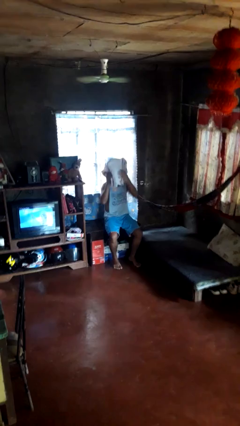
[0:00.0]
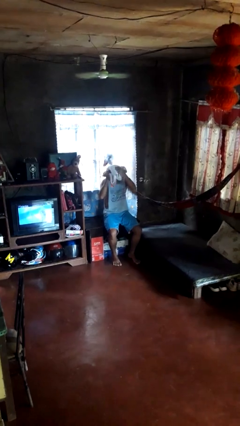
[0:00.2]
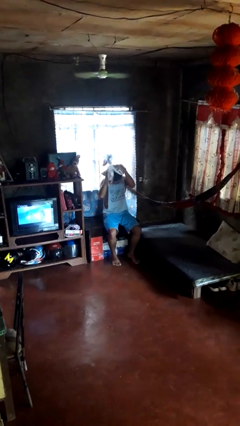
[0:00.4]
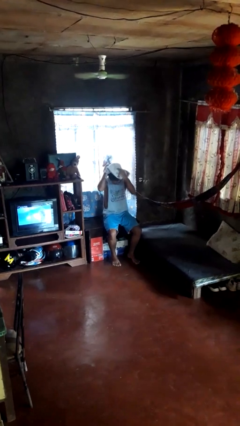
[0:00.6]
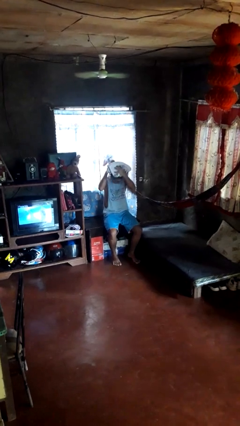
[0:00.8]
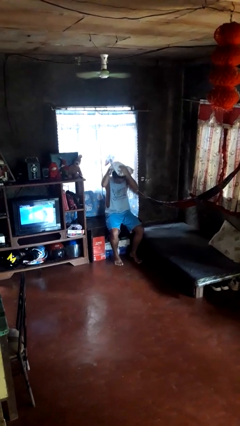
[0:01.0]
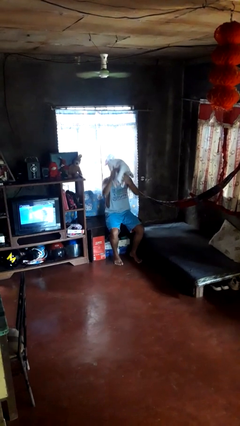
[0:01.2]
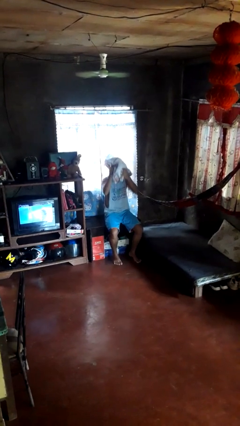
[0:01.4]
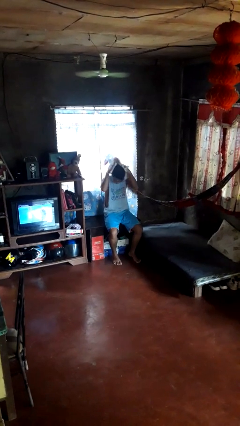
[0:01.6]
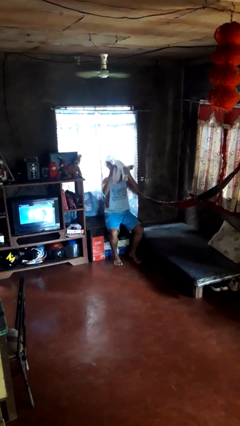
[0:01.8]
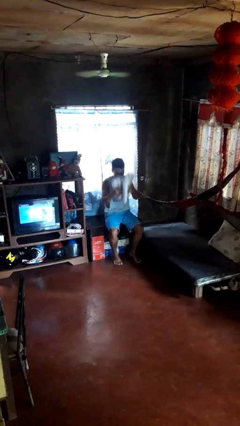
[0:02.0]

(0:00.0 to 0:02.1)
person dries hair with towel

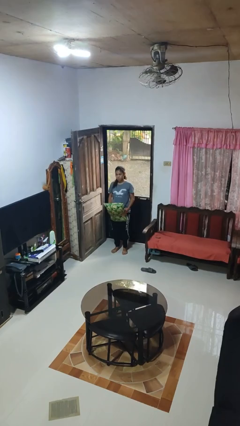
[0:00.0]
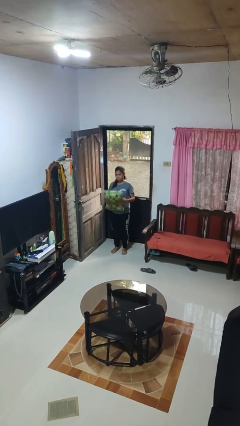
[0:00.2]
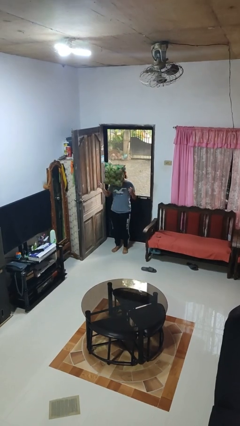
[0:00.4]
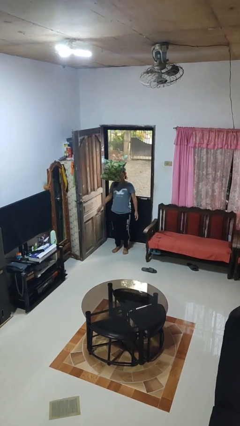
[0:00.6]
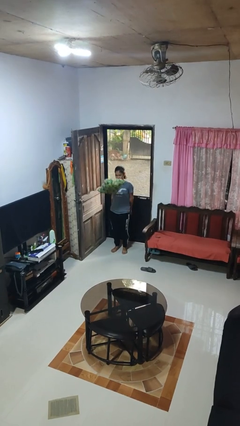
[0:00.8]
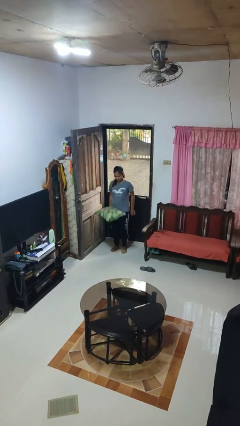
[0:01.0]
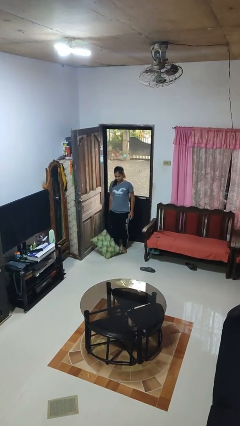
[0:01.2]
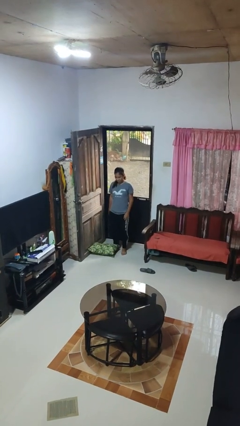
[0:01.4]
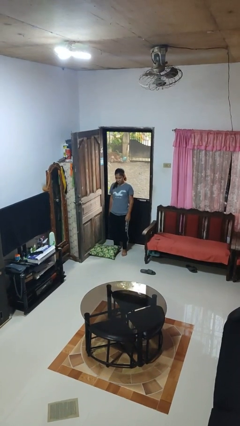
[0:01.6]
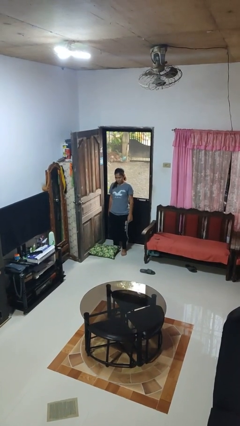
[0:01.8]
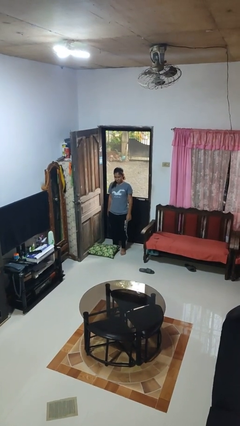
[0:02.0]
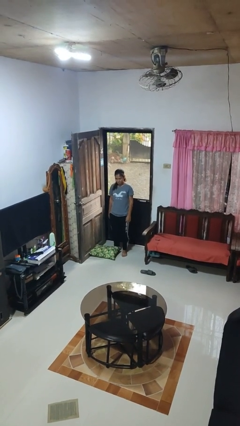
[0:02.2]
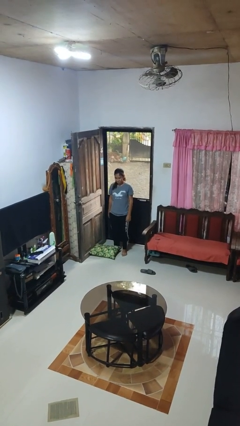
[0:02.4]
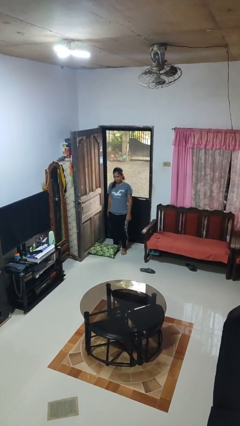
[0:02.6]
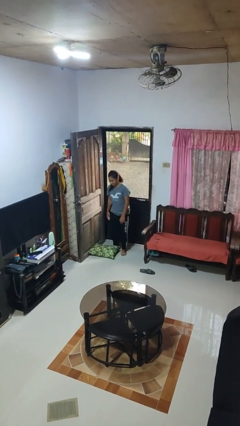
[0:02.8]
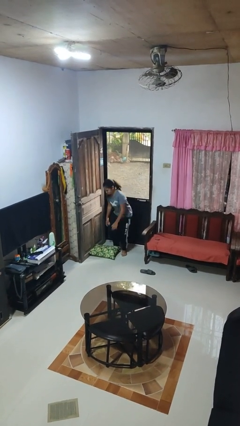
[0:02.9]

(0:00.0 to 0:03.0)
person throws object into air

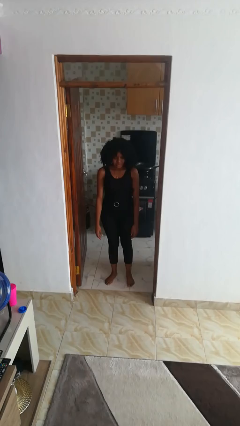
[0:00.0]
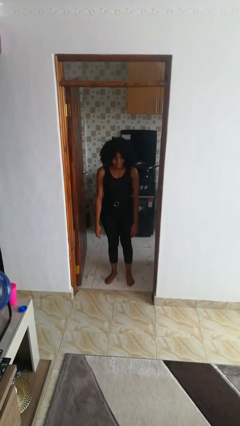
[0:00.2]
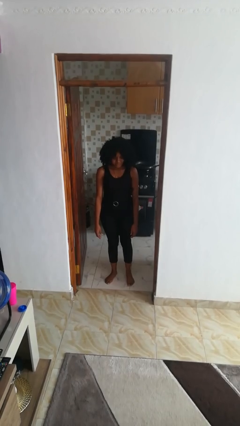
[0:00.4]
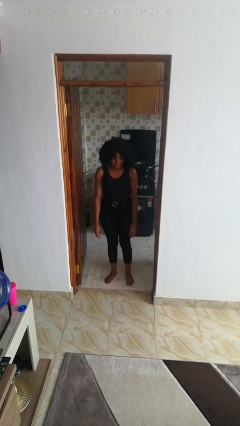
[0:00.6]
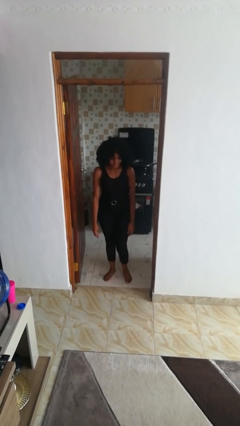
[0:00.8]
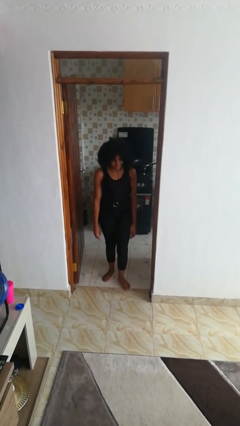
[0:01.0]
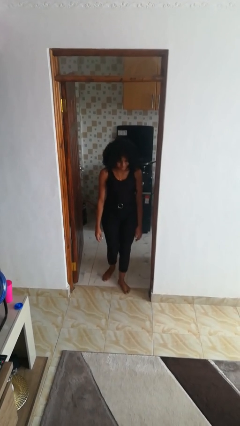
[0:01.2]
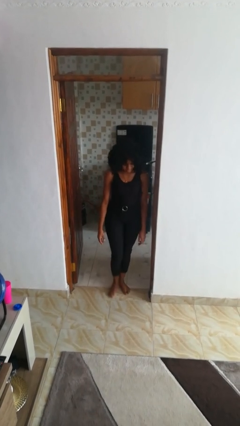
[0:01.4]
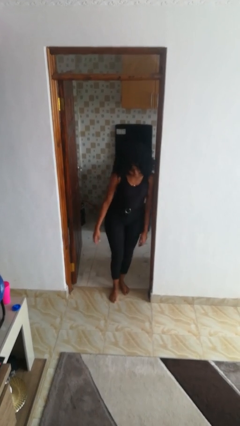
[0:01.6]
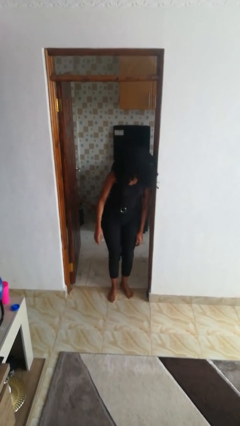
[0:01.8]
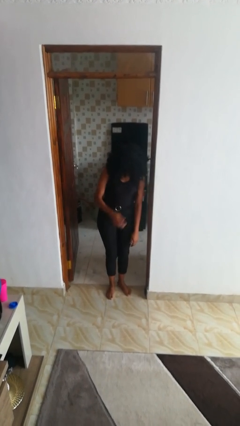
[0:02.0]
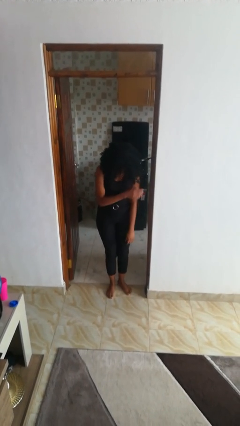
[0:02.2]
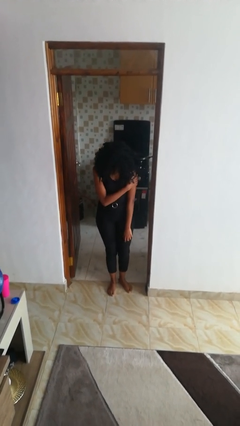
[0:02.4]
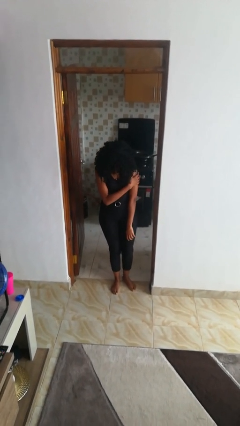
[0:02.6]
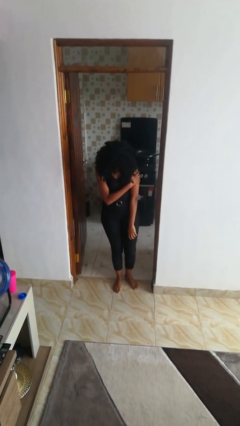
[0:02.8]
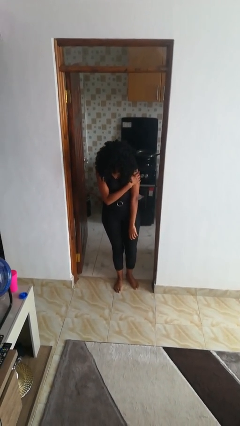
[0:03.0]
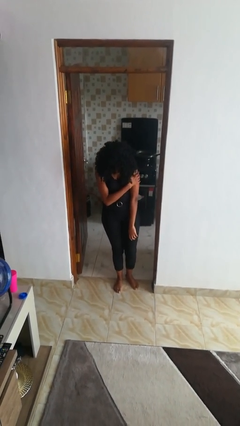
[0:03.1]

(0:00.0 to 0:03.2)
person bumps into wall

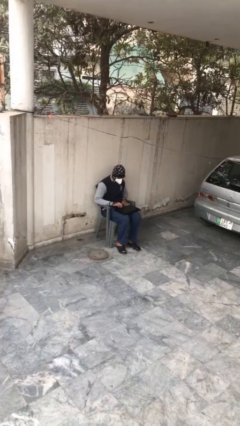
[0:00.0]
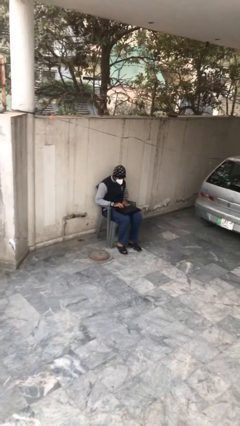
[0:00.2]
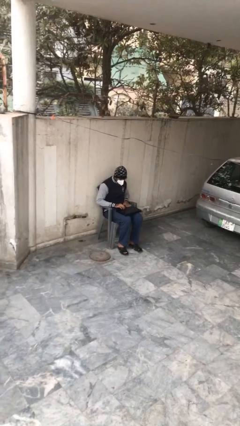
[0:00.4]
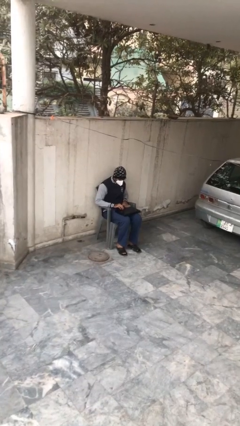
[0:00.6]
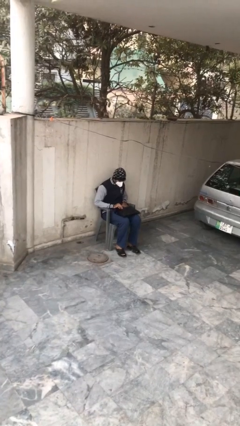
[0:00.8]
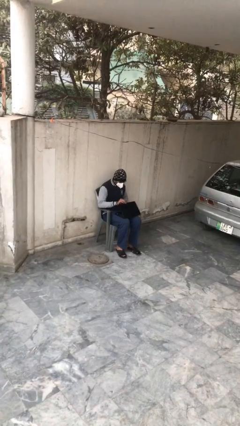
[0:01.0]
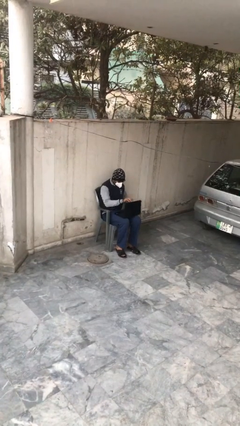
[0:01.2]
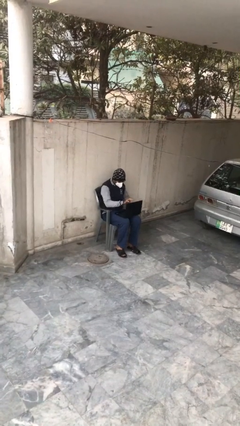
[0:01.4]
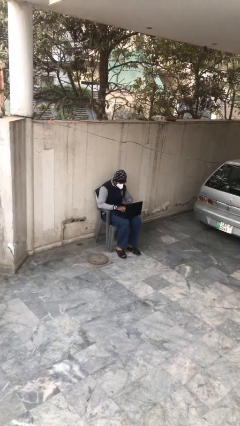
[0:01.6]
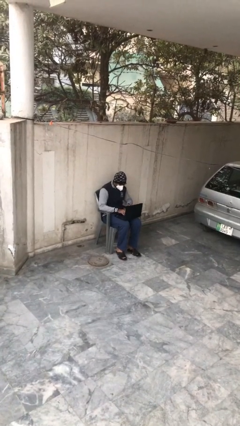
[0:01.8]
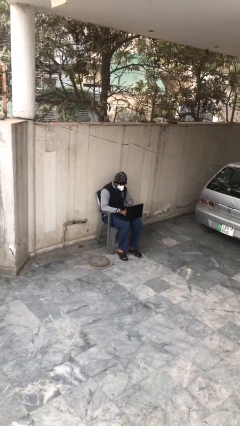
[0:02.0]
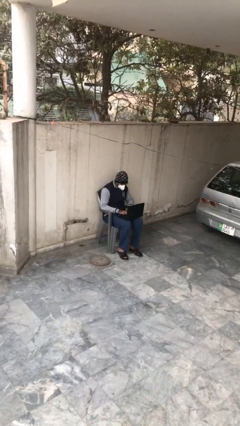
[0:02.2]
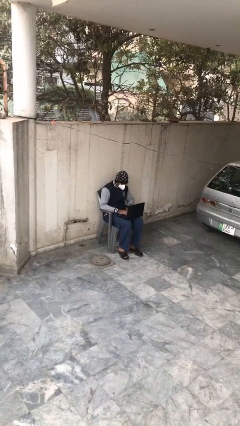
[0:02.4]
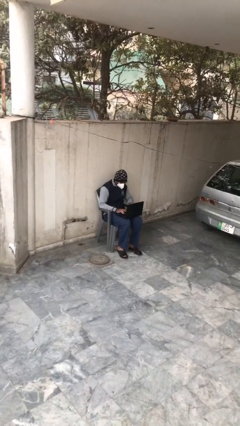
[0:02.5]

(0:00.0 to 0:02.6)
person interacts with laptop

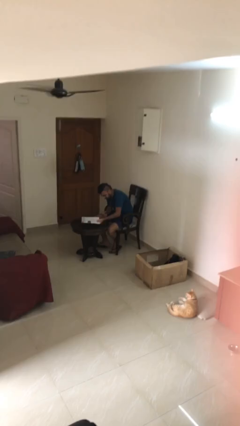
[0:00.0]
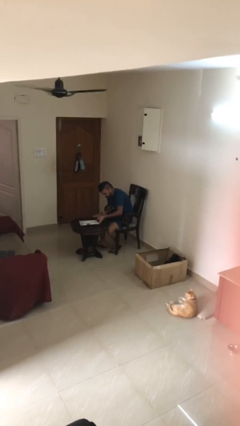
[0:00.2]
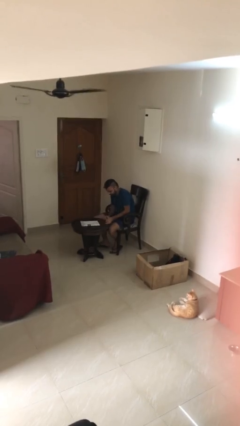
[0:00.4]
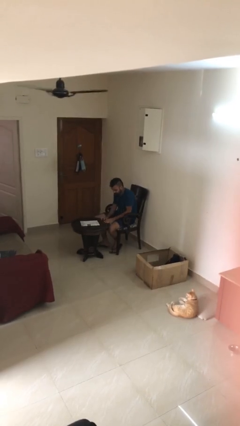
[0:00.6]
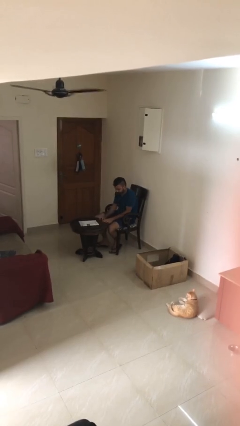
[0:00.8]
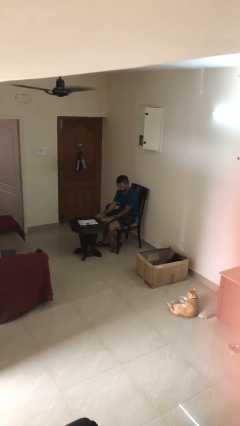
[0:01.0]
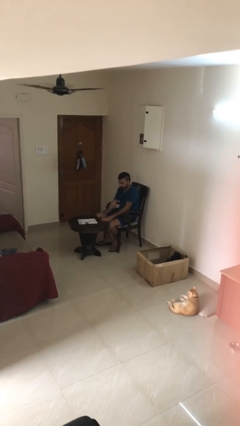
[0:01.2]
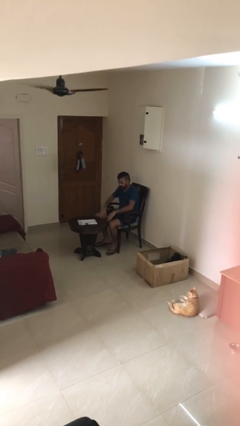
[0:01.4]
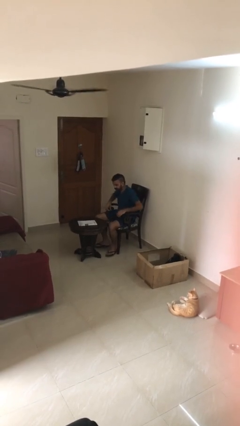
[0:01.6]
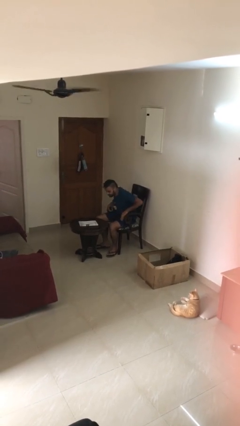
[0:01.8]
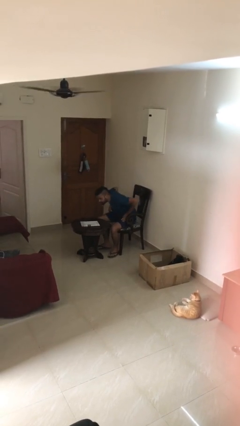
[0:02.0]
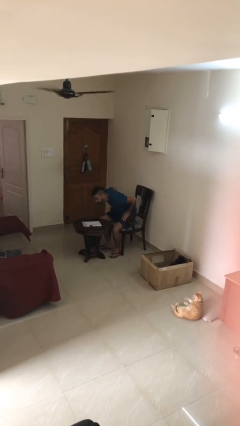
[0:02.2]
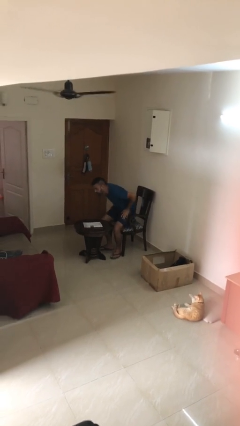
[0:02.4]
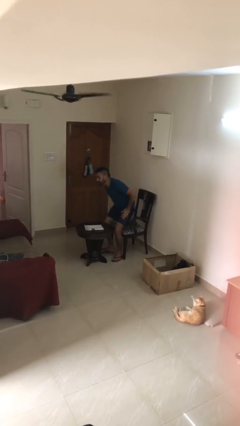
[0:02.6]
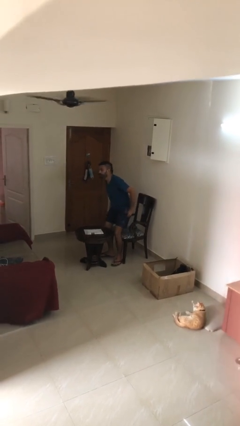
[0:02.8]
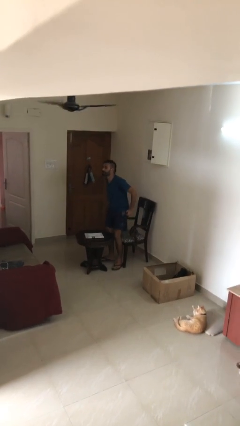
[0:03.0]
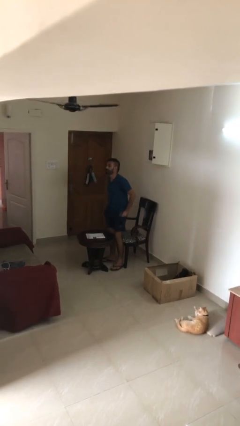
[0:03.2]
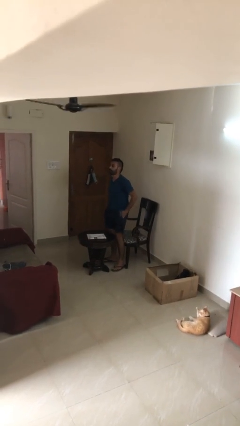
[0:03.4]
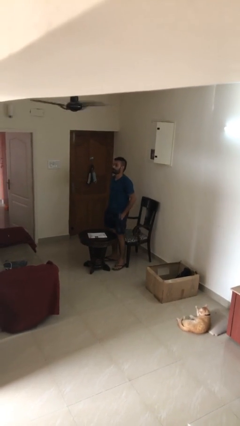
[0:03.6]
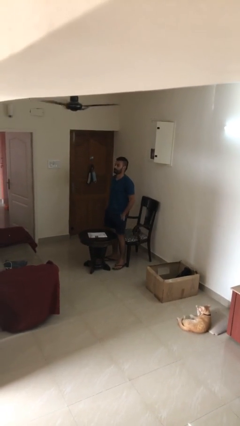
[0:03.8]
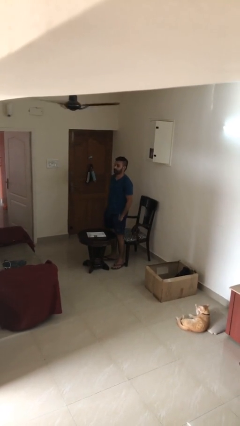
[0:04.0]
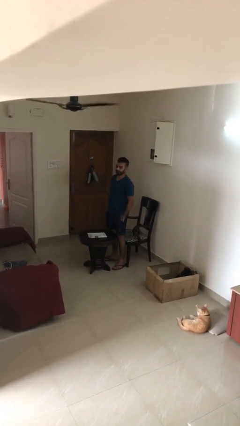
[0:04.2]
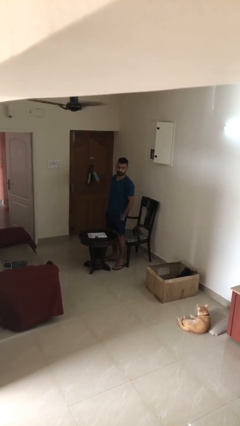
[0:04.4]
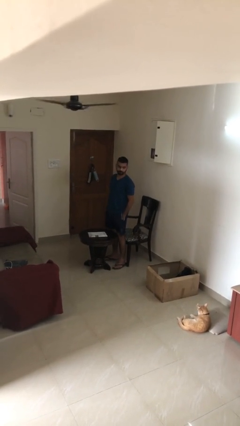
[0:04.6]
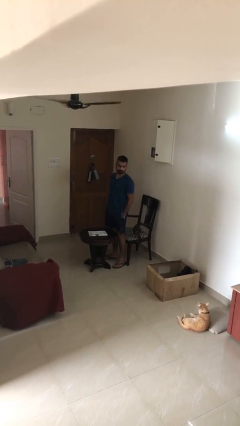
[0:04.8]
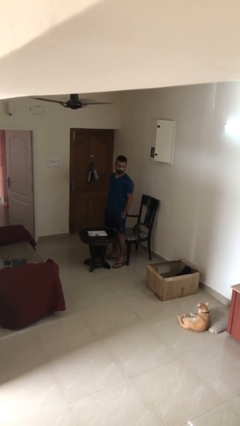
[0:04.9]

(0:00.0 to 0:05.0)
person puts down object on table

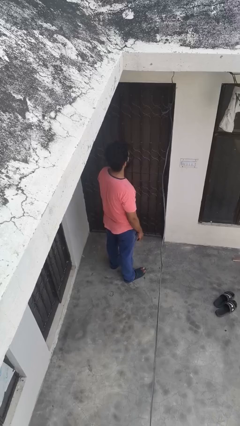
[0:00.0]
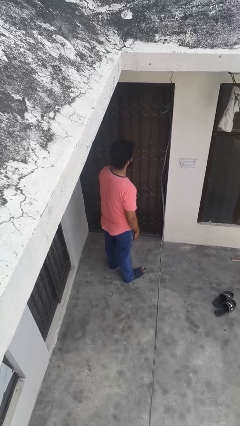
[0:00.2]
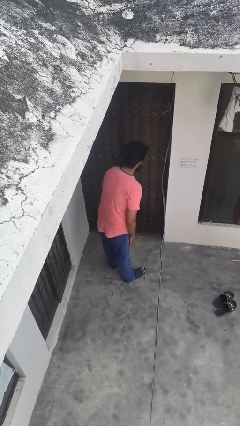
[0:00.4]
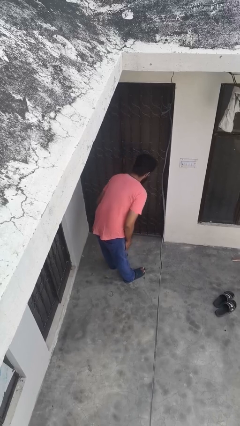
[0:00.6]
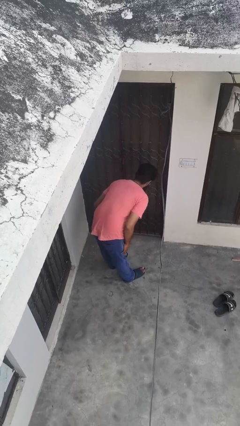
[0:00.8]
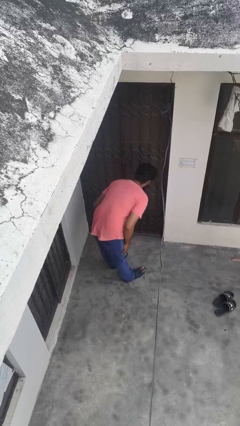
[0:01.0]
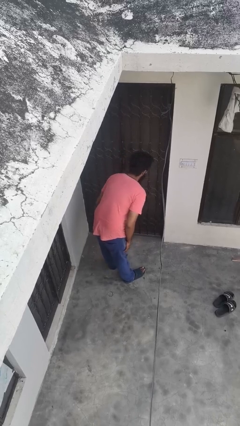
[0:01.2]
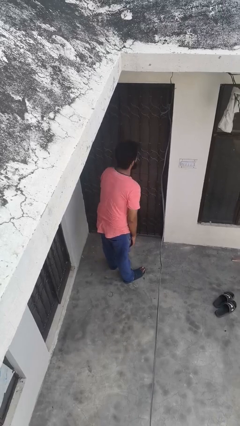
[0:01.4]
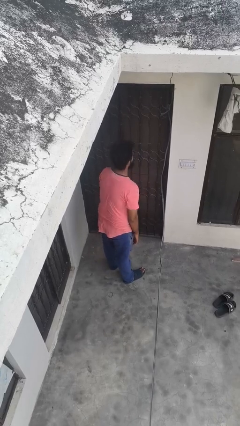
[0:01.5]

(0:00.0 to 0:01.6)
person bows
